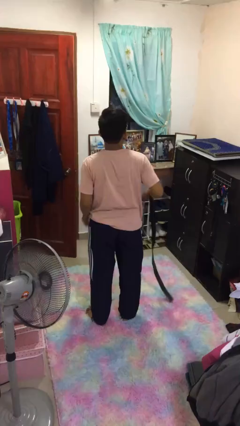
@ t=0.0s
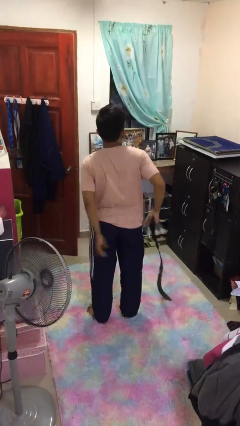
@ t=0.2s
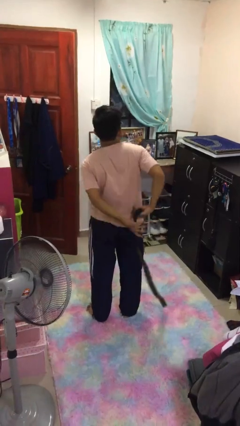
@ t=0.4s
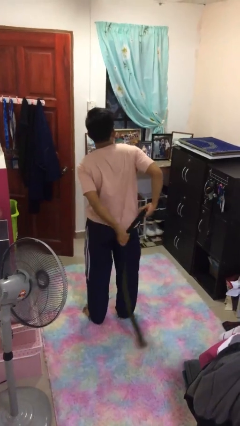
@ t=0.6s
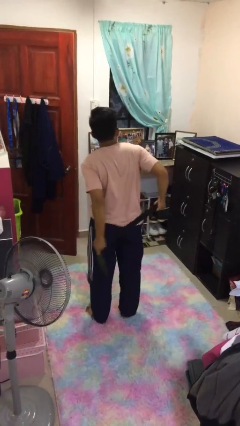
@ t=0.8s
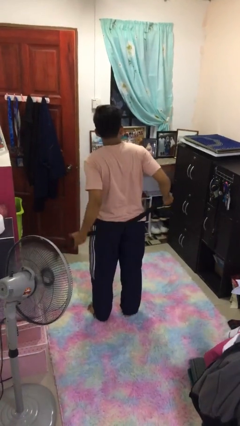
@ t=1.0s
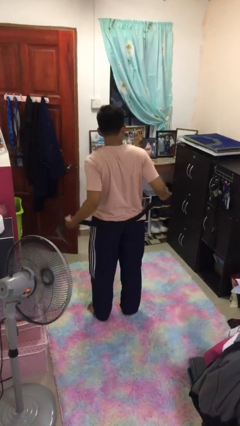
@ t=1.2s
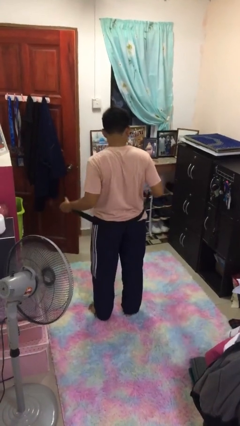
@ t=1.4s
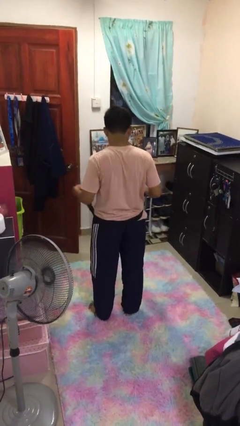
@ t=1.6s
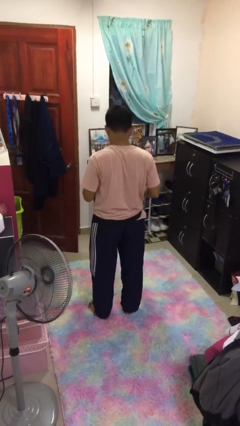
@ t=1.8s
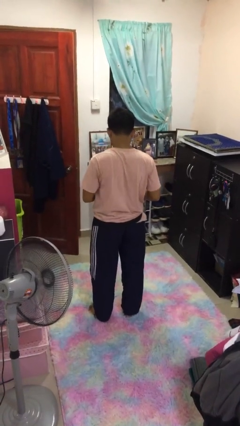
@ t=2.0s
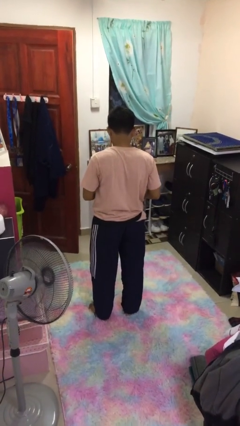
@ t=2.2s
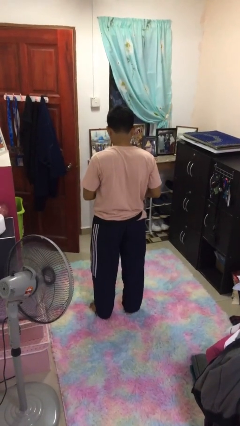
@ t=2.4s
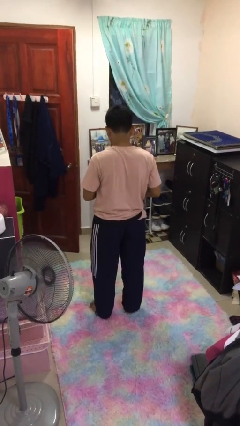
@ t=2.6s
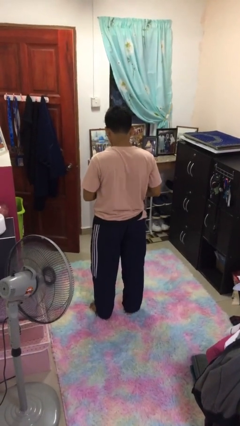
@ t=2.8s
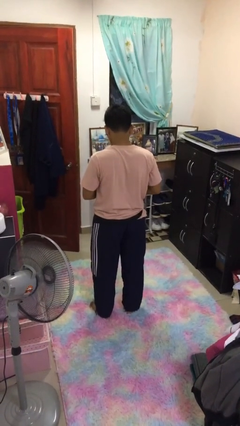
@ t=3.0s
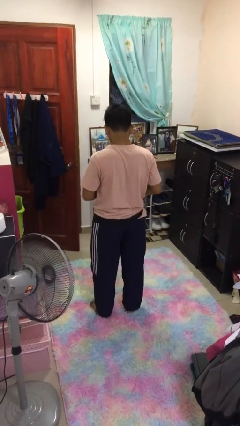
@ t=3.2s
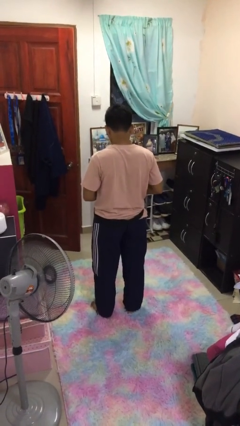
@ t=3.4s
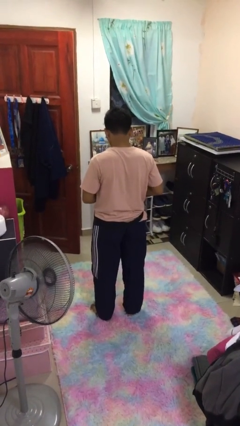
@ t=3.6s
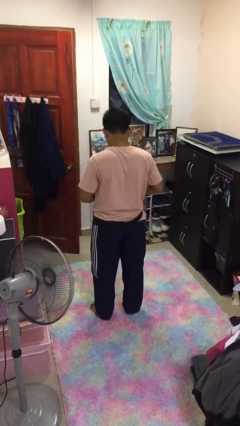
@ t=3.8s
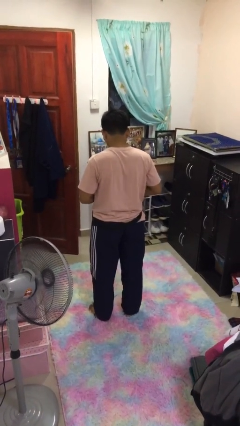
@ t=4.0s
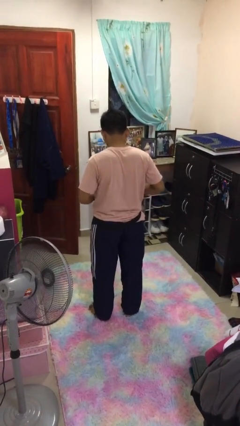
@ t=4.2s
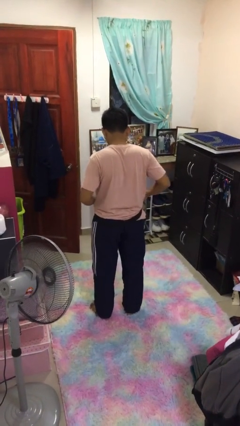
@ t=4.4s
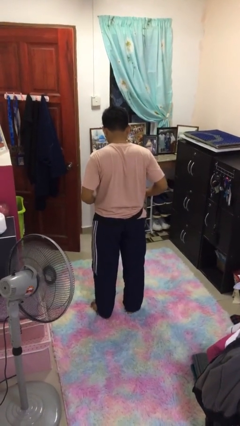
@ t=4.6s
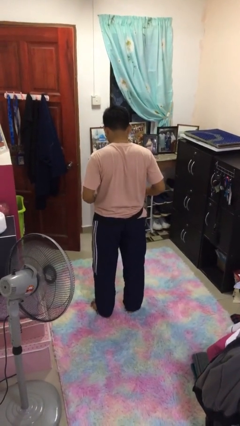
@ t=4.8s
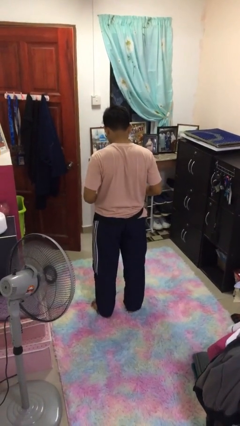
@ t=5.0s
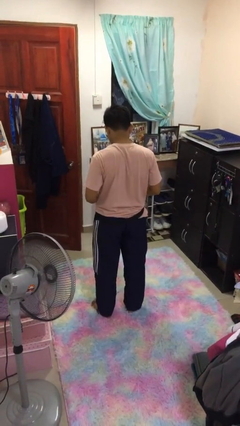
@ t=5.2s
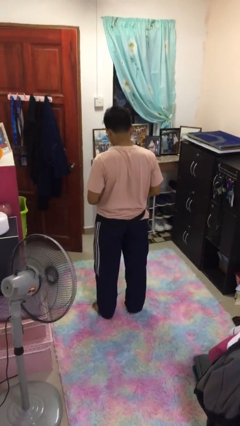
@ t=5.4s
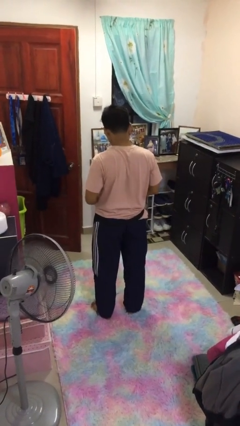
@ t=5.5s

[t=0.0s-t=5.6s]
person puts on belt

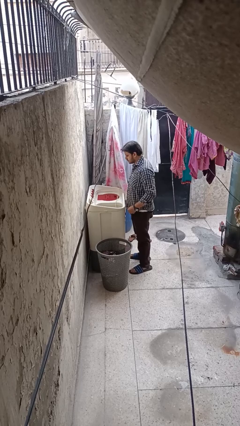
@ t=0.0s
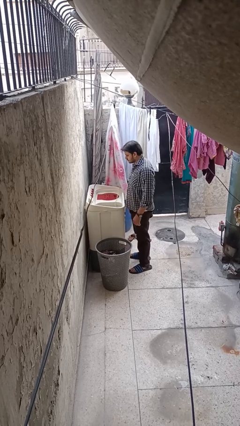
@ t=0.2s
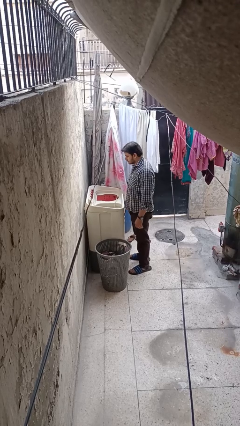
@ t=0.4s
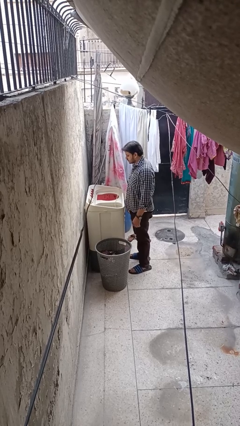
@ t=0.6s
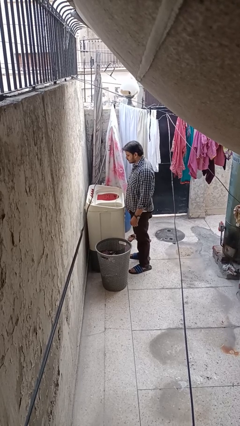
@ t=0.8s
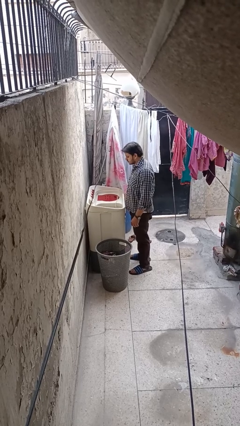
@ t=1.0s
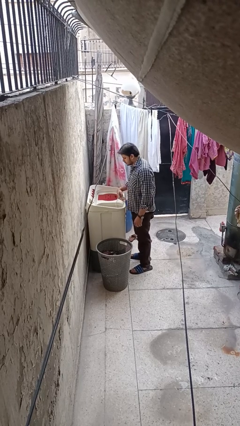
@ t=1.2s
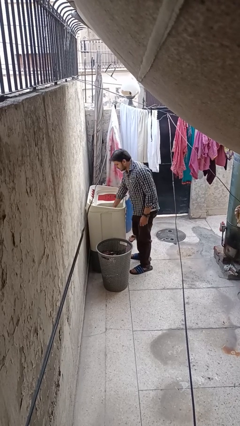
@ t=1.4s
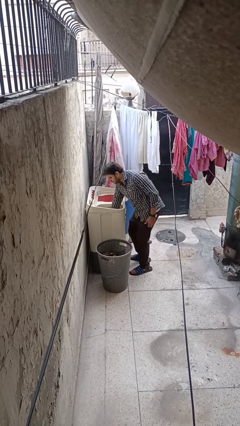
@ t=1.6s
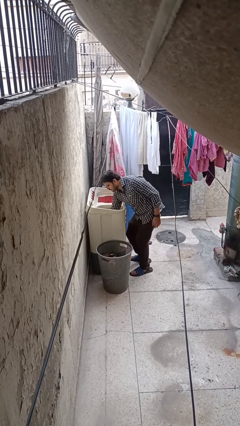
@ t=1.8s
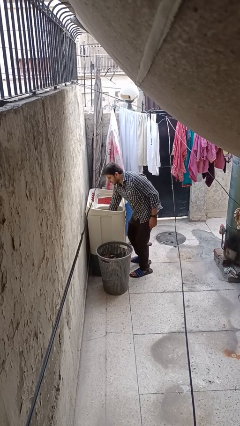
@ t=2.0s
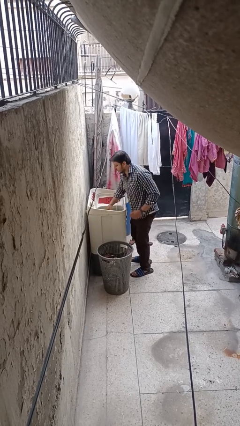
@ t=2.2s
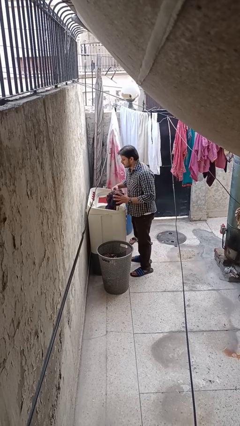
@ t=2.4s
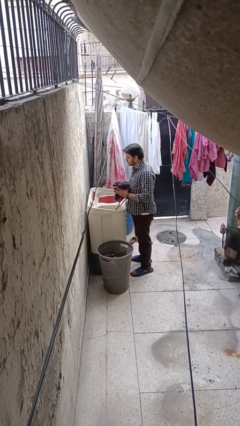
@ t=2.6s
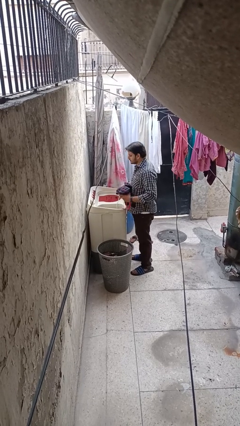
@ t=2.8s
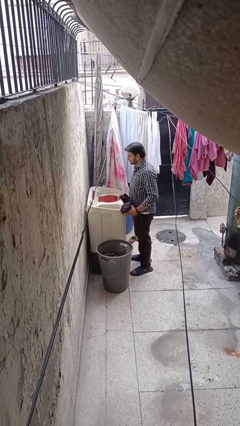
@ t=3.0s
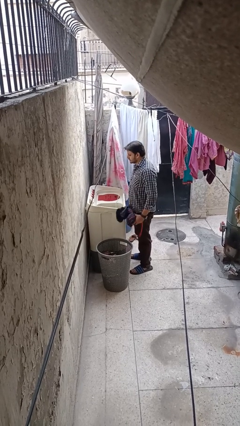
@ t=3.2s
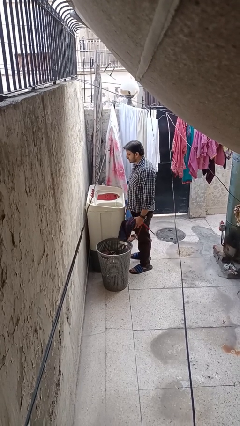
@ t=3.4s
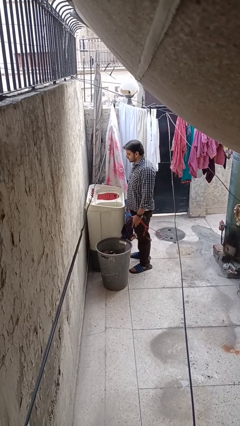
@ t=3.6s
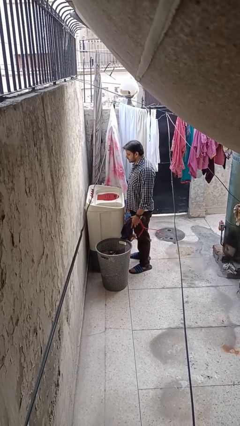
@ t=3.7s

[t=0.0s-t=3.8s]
person loads clotheswasher

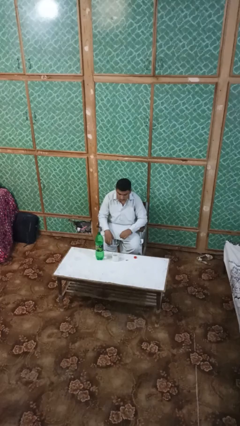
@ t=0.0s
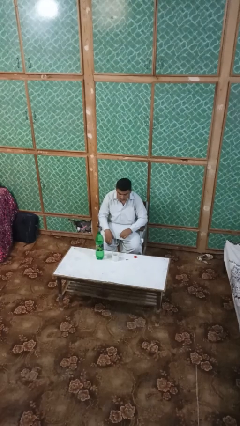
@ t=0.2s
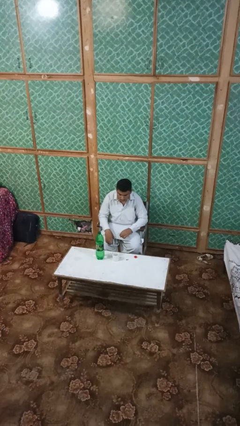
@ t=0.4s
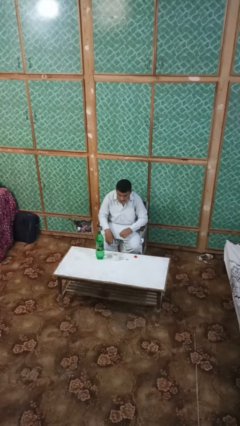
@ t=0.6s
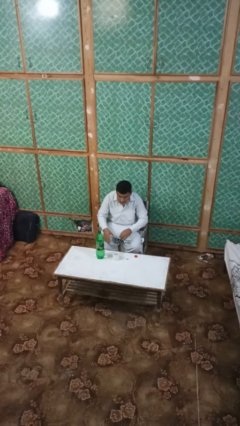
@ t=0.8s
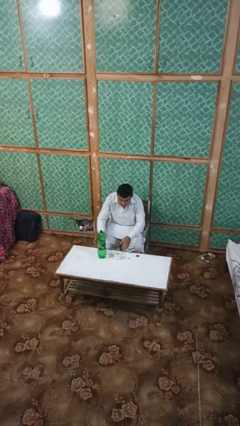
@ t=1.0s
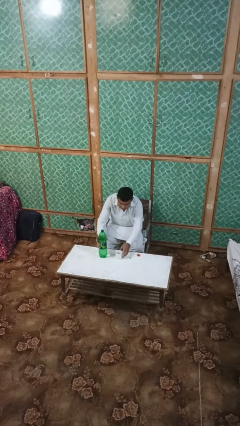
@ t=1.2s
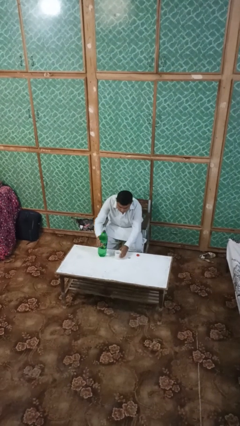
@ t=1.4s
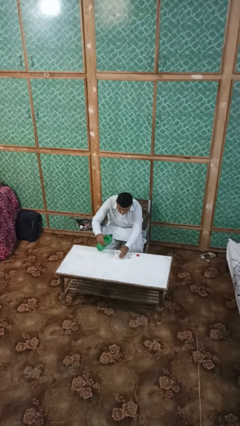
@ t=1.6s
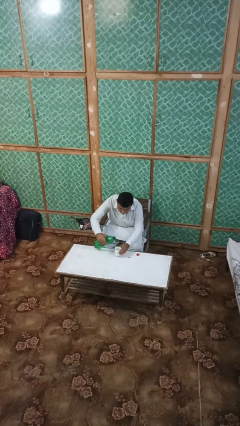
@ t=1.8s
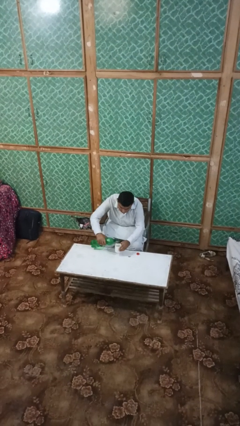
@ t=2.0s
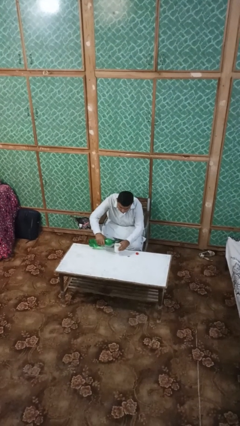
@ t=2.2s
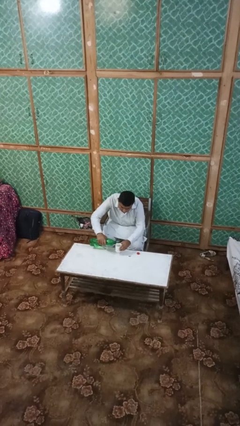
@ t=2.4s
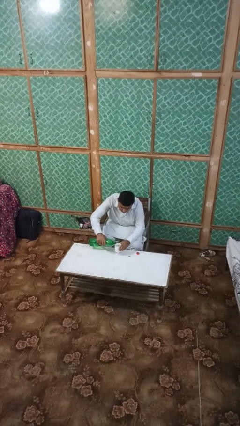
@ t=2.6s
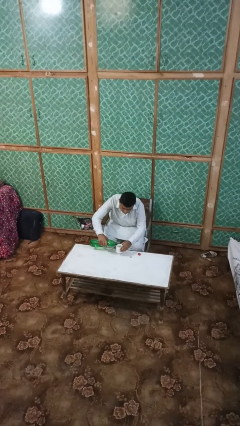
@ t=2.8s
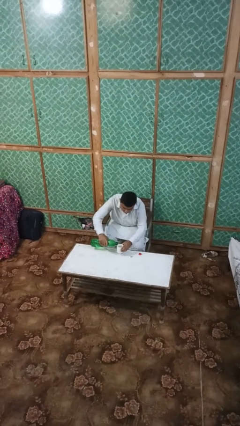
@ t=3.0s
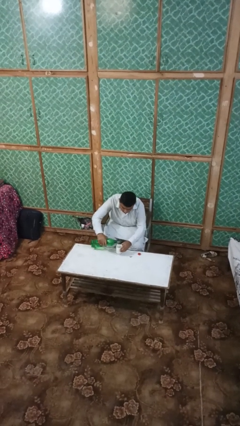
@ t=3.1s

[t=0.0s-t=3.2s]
person pours liquid into cup

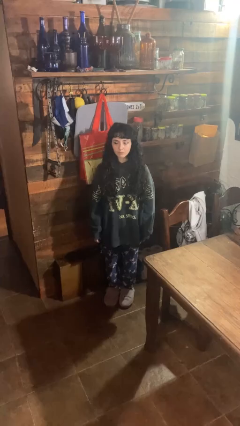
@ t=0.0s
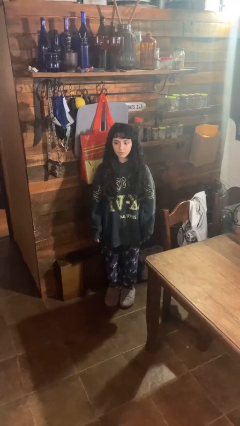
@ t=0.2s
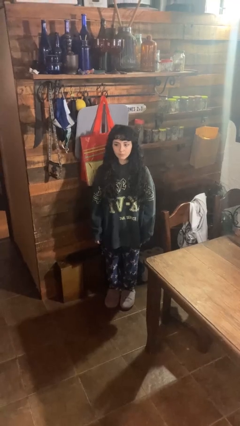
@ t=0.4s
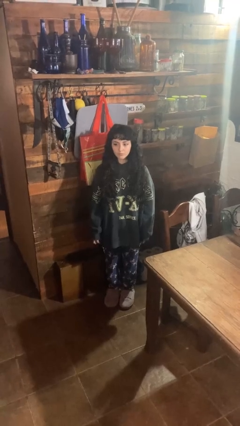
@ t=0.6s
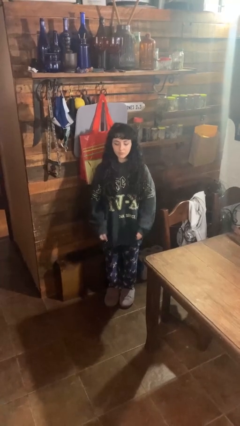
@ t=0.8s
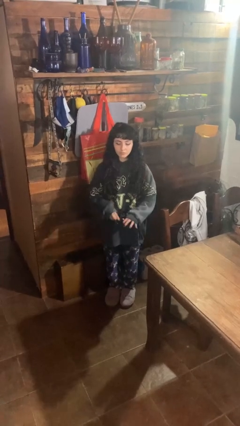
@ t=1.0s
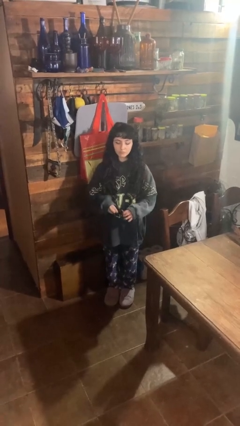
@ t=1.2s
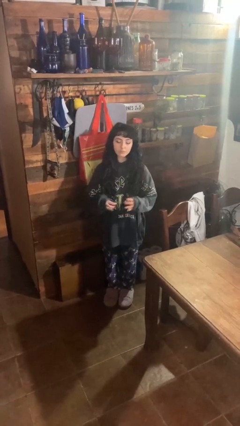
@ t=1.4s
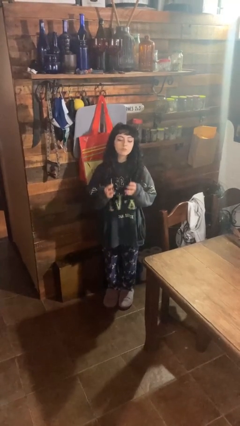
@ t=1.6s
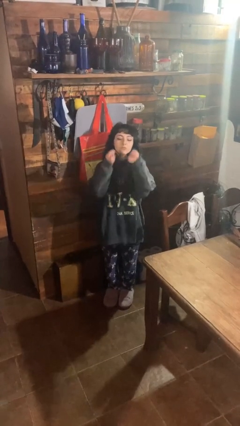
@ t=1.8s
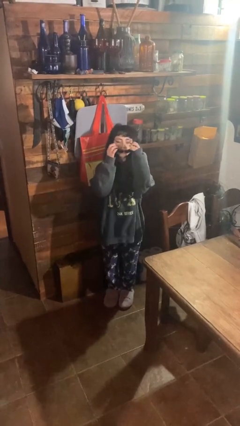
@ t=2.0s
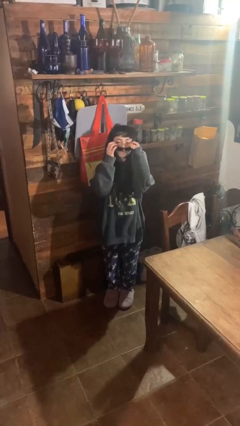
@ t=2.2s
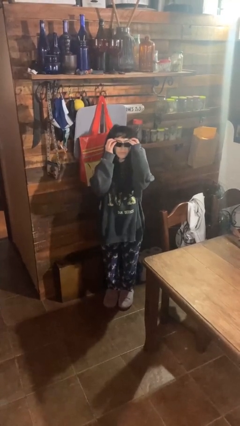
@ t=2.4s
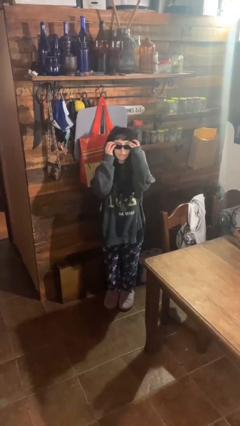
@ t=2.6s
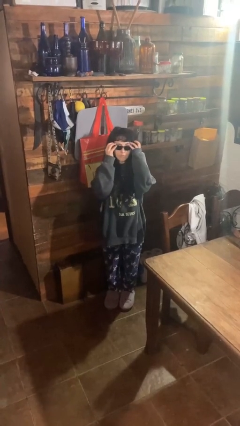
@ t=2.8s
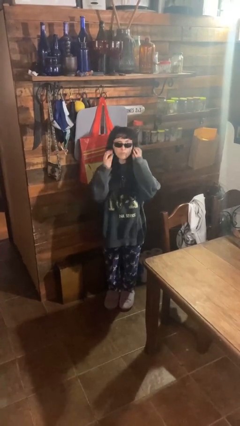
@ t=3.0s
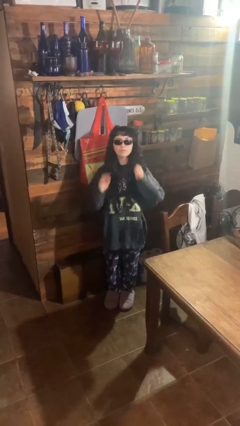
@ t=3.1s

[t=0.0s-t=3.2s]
person puts on sunglasses

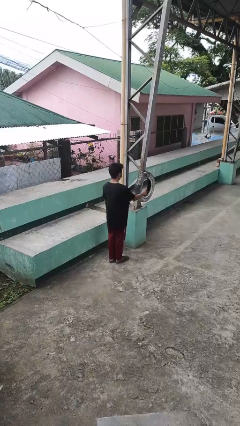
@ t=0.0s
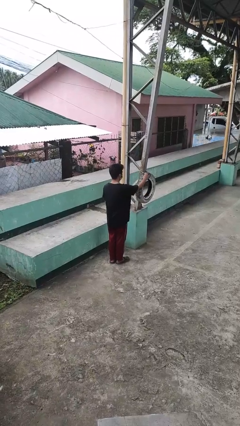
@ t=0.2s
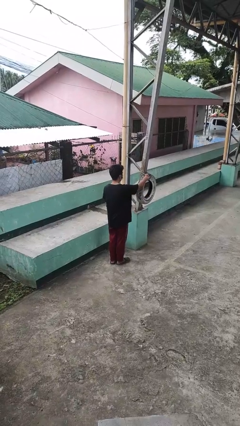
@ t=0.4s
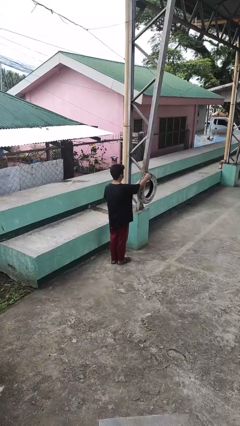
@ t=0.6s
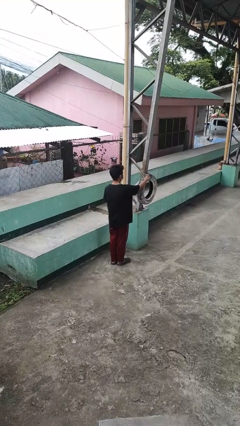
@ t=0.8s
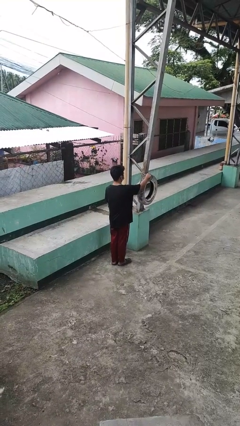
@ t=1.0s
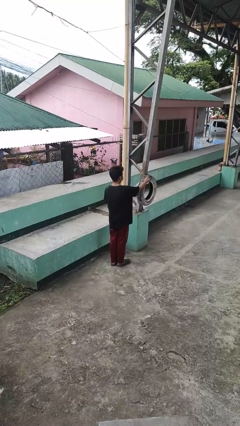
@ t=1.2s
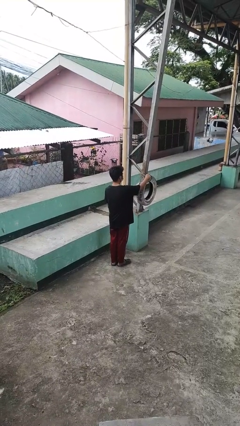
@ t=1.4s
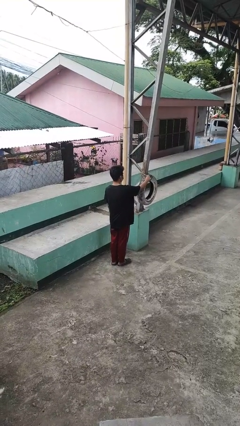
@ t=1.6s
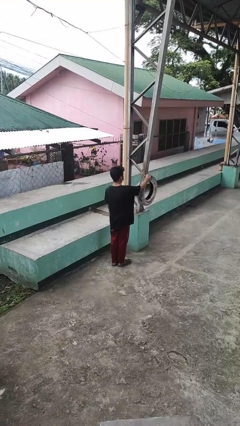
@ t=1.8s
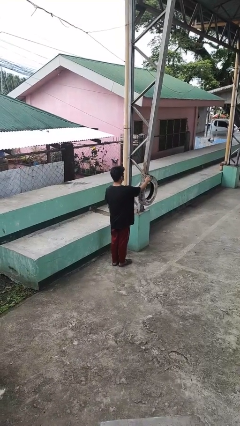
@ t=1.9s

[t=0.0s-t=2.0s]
person taps object with finger
